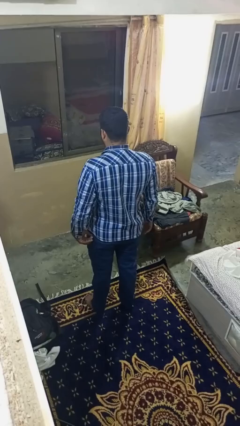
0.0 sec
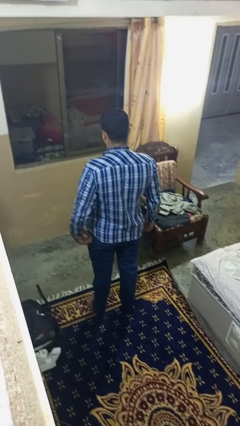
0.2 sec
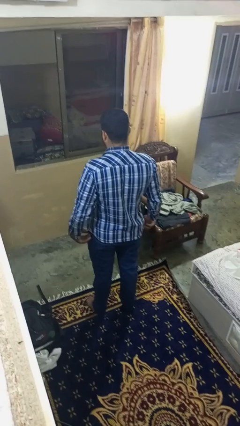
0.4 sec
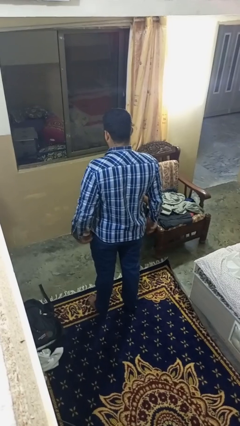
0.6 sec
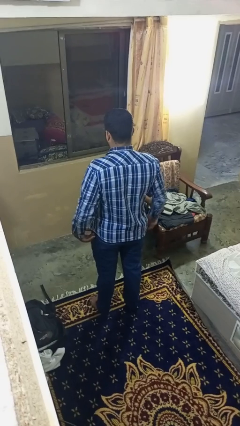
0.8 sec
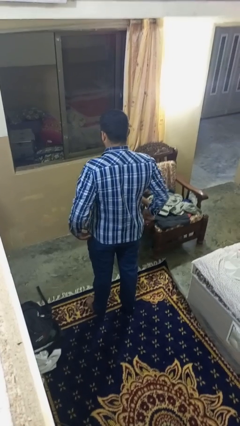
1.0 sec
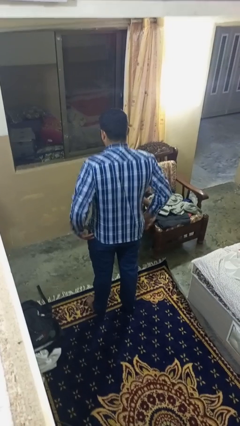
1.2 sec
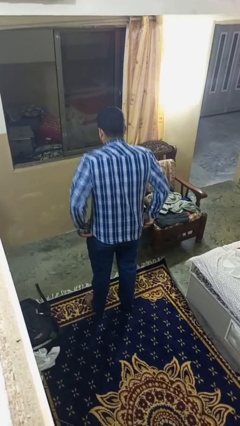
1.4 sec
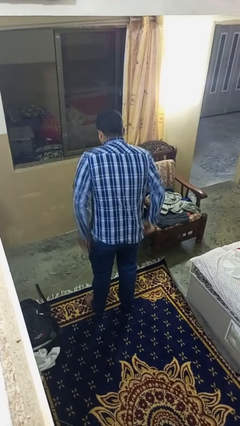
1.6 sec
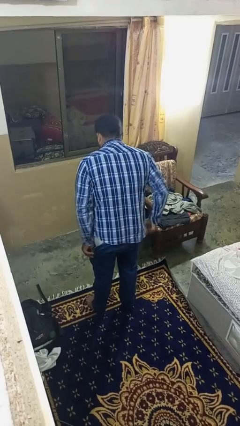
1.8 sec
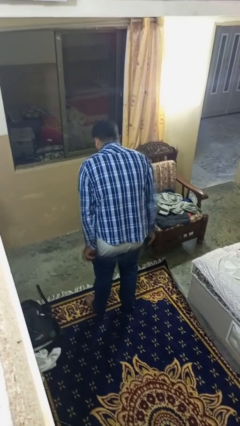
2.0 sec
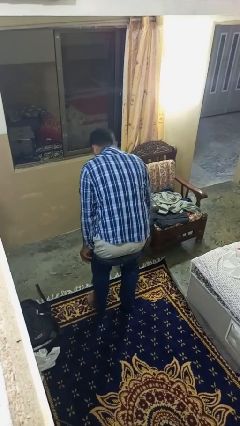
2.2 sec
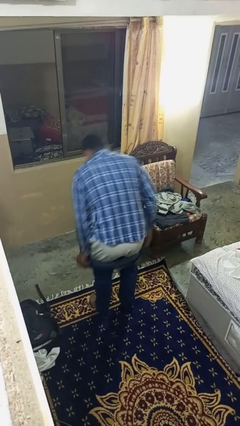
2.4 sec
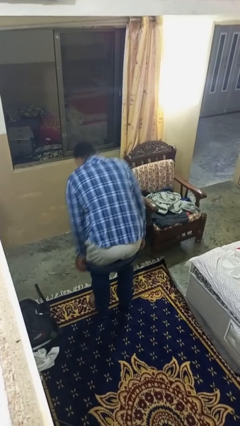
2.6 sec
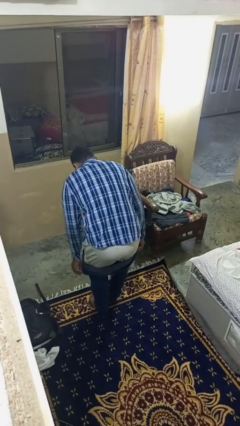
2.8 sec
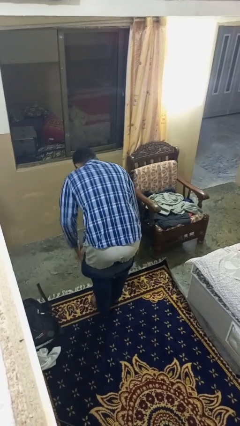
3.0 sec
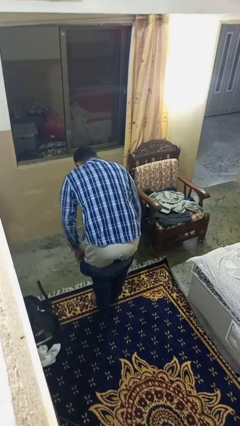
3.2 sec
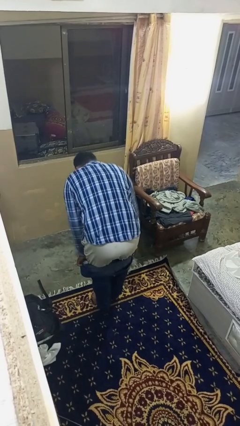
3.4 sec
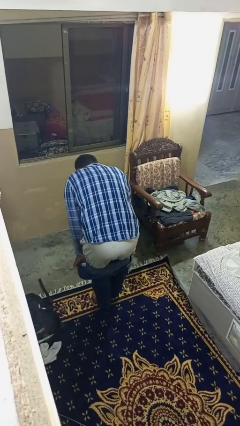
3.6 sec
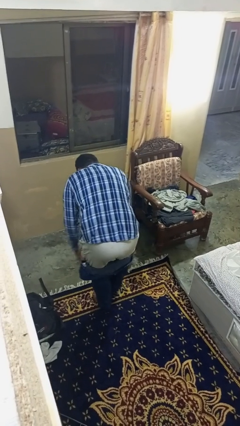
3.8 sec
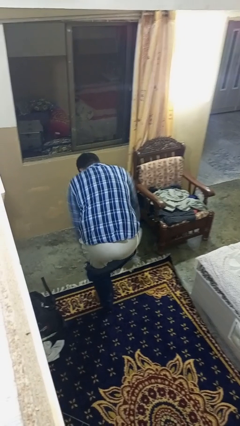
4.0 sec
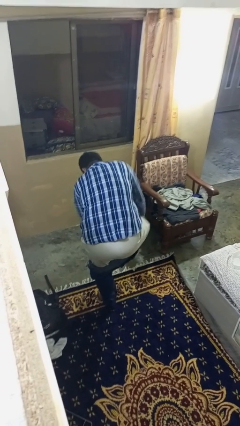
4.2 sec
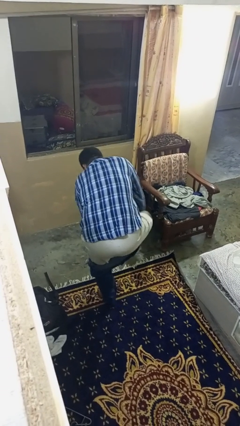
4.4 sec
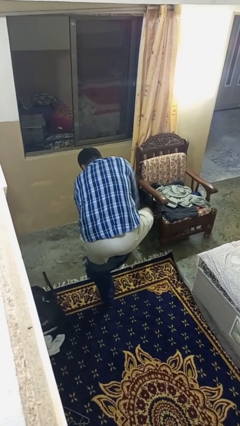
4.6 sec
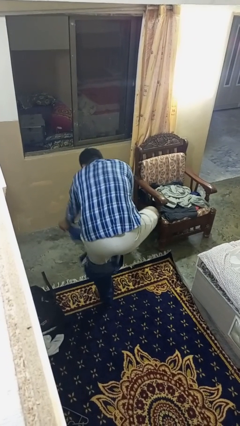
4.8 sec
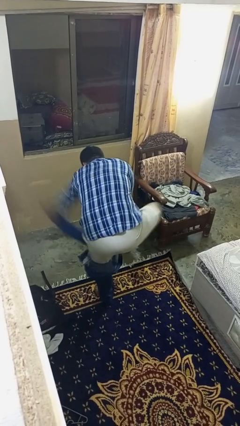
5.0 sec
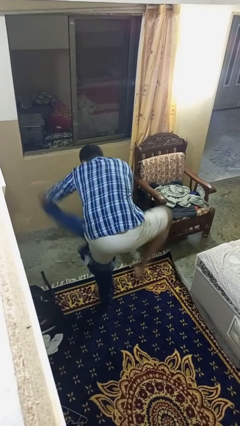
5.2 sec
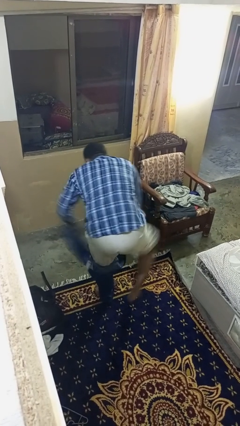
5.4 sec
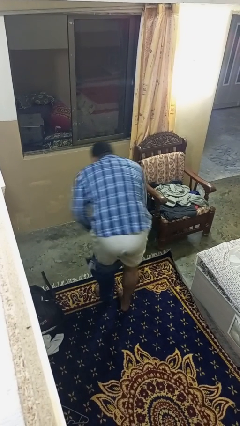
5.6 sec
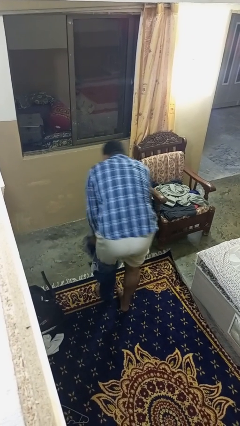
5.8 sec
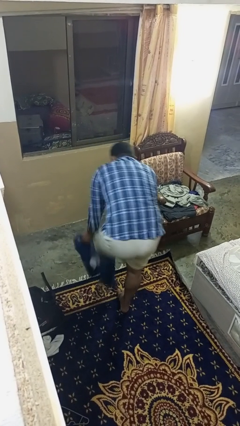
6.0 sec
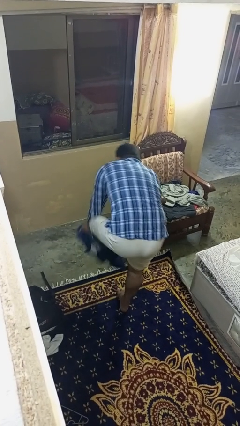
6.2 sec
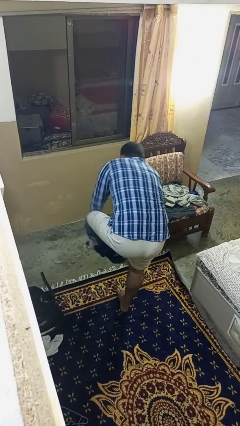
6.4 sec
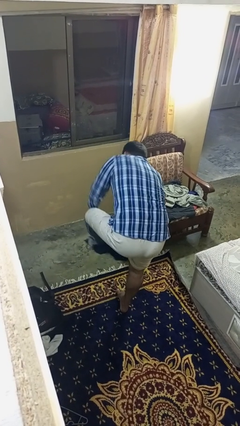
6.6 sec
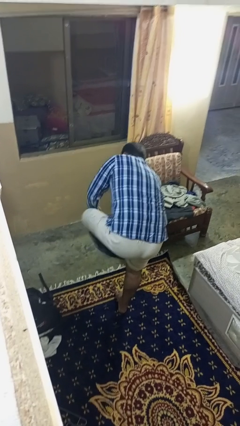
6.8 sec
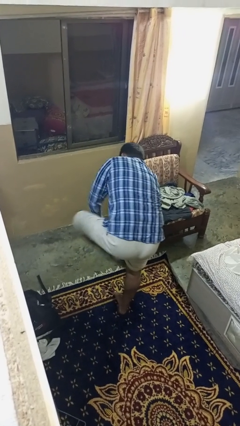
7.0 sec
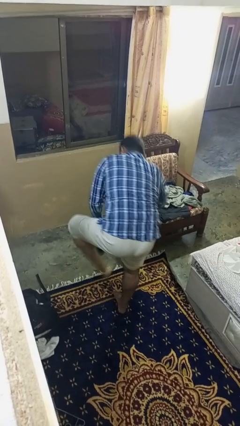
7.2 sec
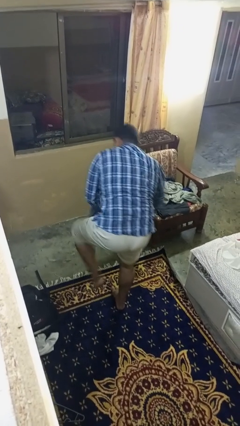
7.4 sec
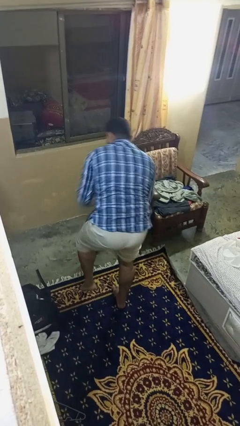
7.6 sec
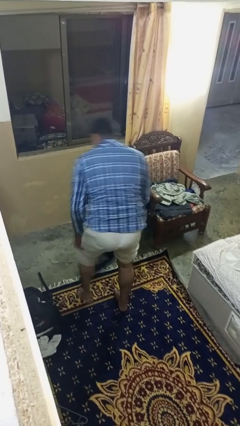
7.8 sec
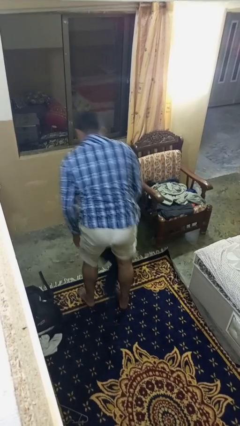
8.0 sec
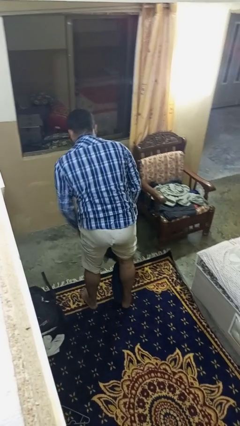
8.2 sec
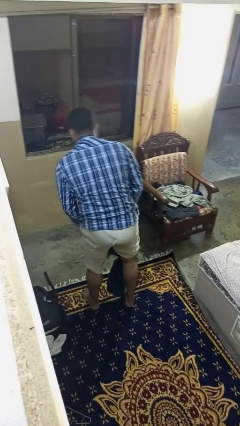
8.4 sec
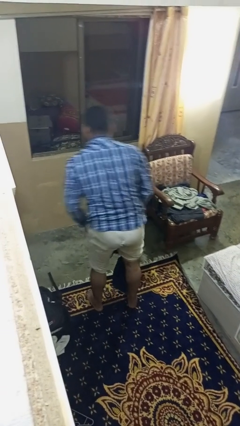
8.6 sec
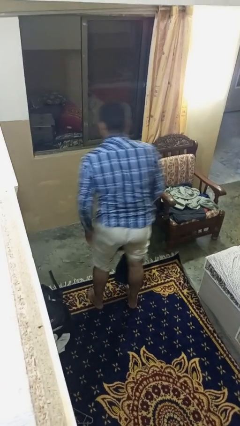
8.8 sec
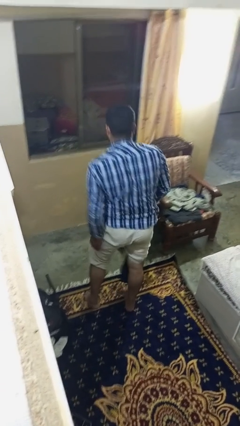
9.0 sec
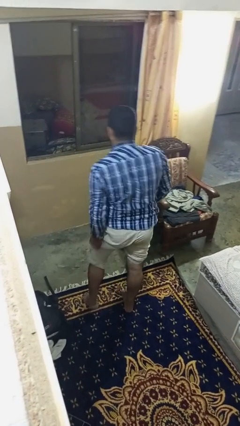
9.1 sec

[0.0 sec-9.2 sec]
person takes off pants

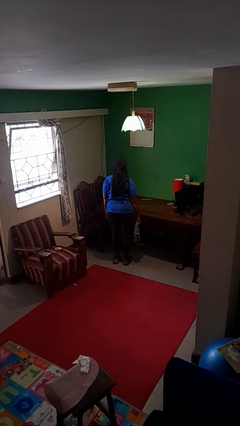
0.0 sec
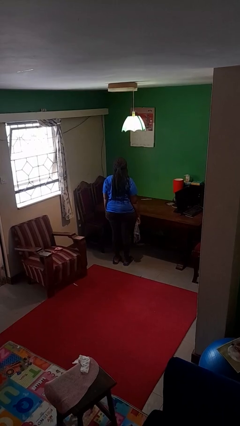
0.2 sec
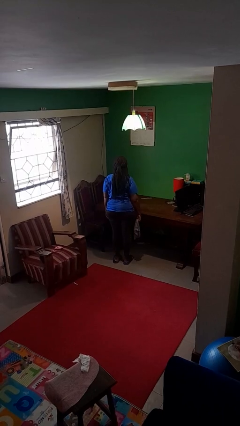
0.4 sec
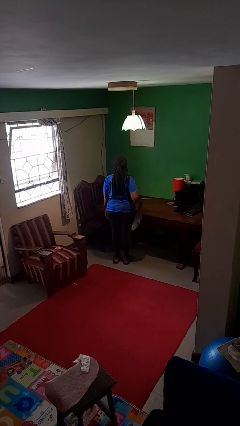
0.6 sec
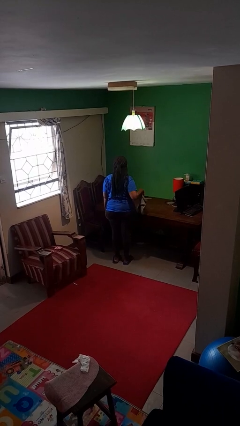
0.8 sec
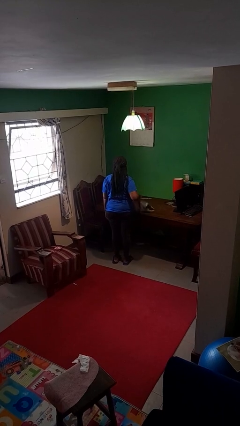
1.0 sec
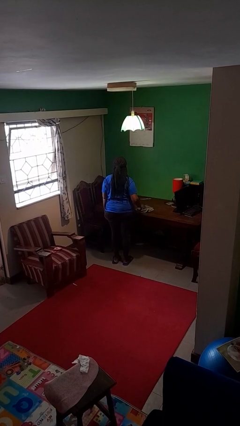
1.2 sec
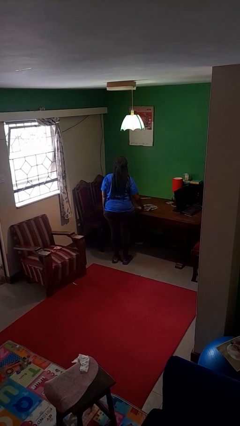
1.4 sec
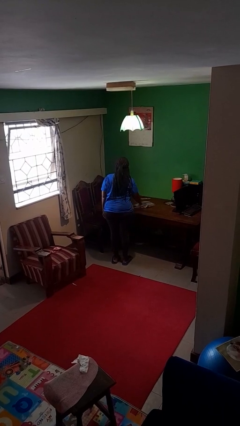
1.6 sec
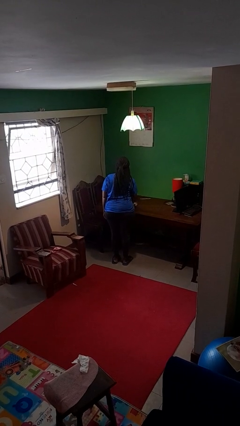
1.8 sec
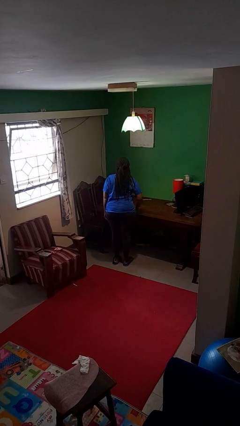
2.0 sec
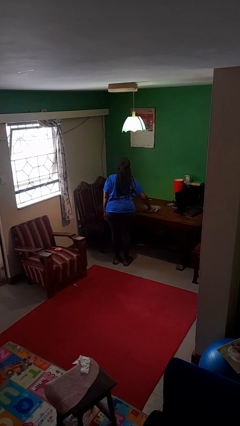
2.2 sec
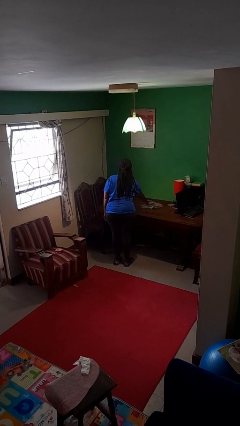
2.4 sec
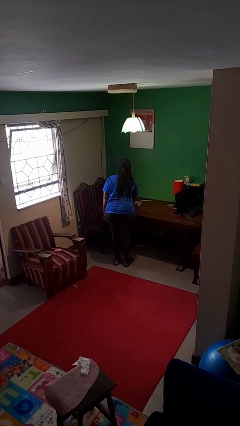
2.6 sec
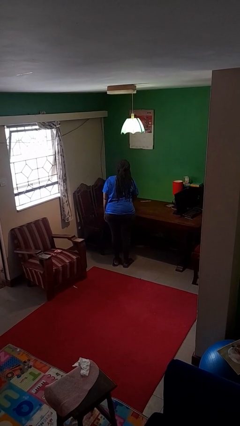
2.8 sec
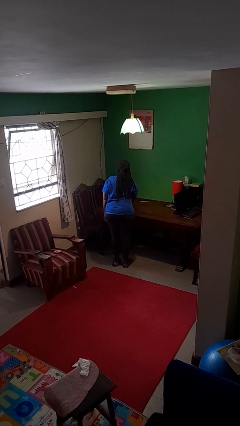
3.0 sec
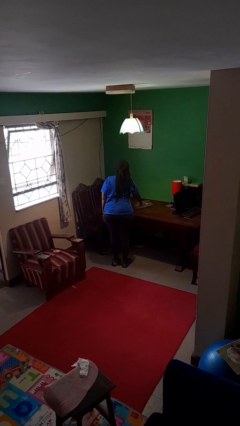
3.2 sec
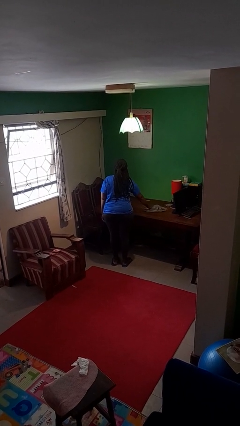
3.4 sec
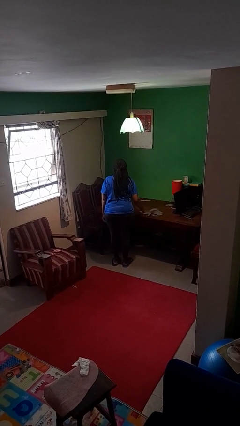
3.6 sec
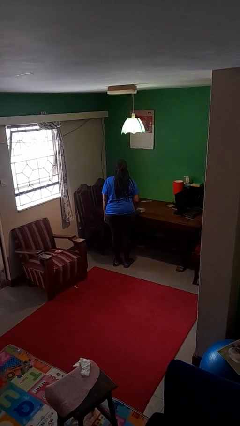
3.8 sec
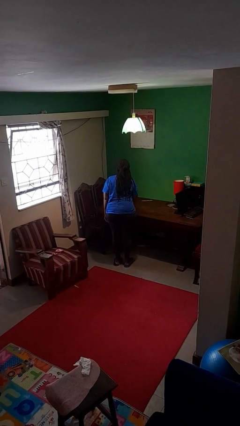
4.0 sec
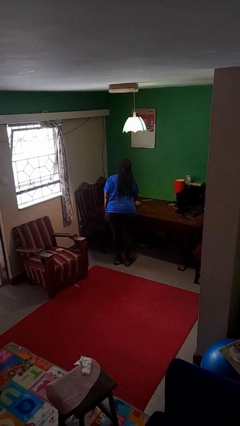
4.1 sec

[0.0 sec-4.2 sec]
person cleans table with rag

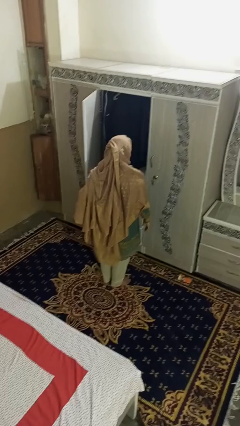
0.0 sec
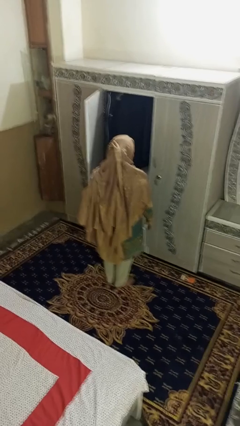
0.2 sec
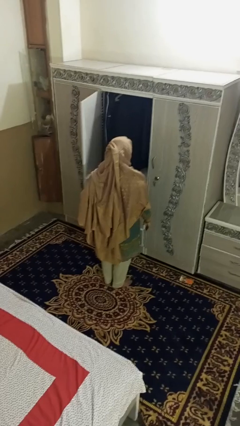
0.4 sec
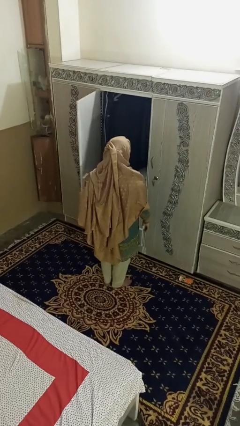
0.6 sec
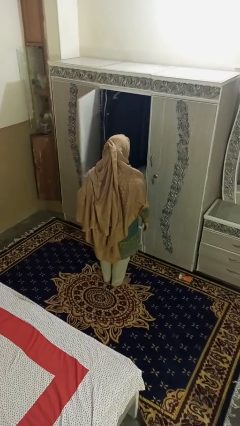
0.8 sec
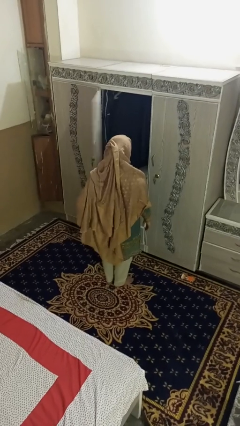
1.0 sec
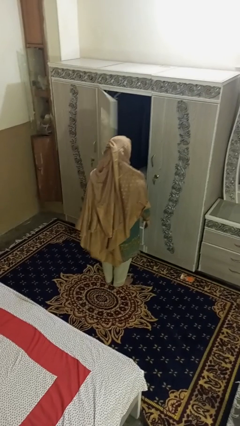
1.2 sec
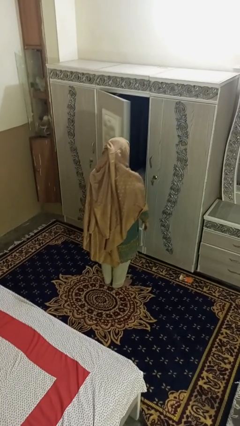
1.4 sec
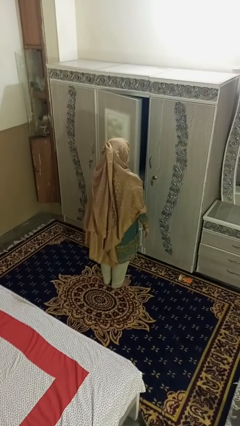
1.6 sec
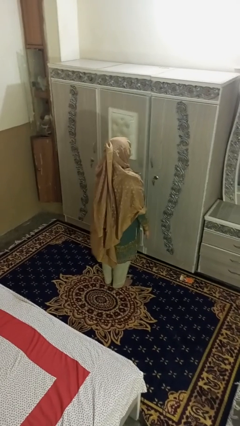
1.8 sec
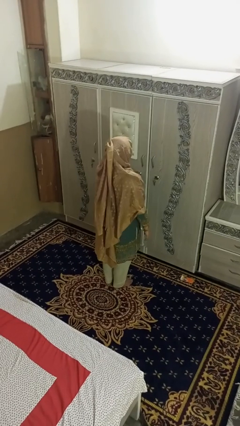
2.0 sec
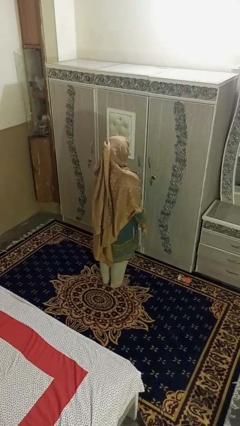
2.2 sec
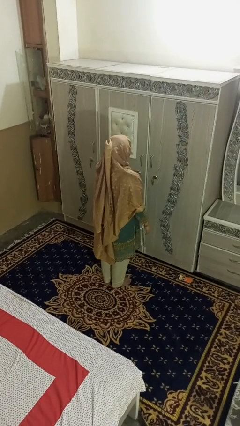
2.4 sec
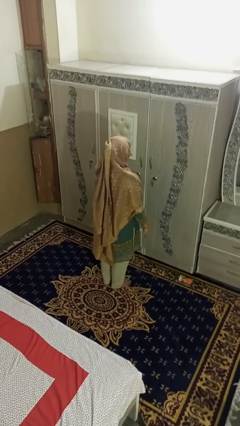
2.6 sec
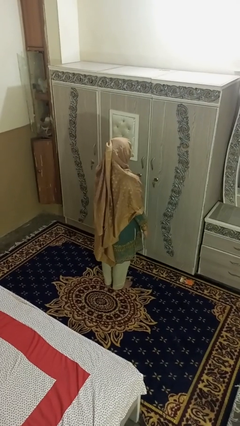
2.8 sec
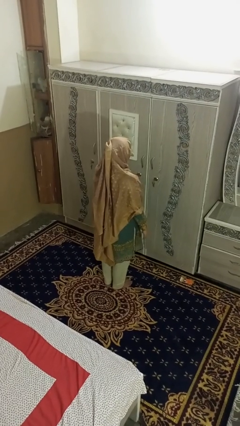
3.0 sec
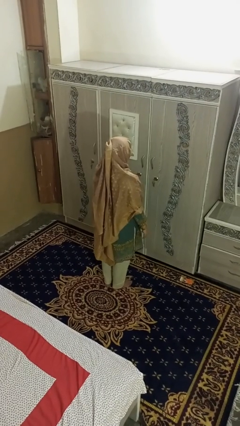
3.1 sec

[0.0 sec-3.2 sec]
person closes dresser drawer

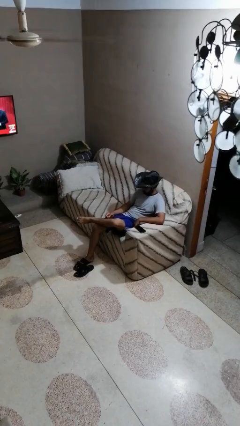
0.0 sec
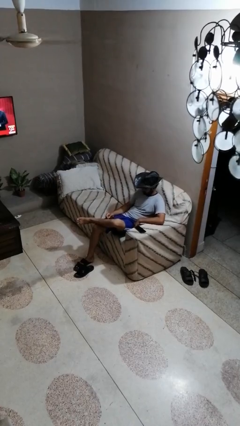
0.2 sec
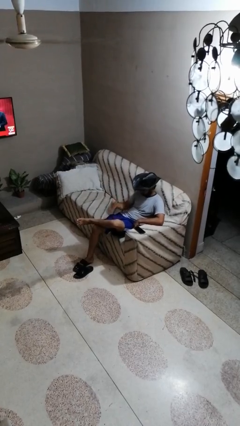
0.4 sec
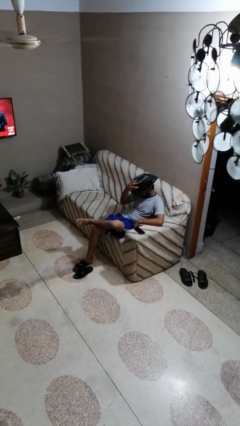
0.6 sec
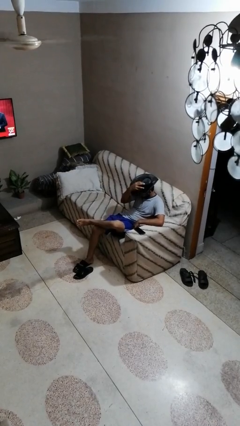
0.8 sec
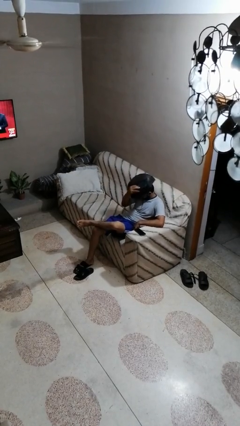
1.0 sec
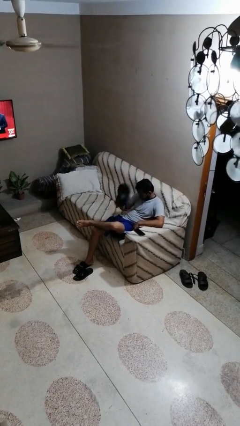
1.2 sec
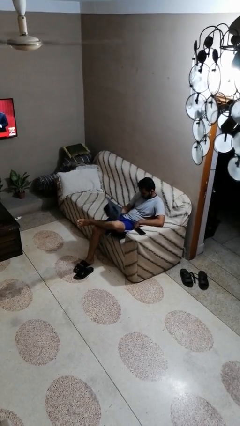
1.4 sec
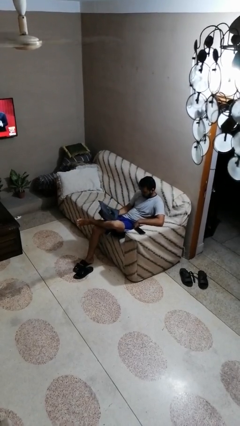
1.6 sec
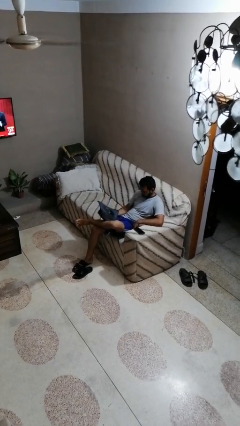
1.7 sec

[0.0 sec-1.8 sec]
person takes off hat
